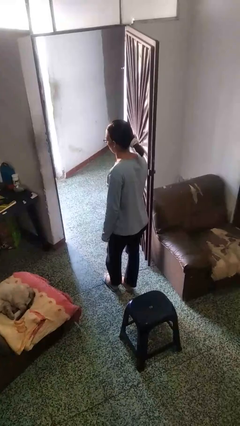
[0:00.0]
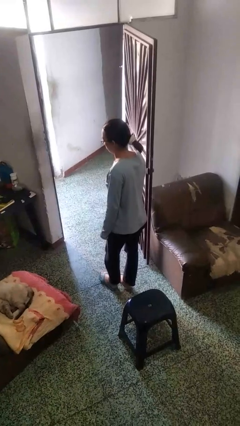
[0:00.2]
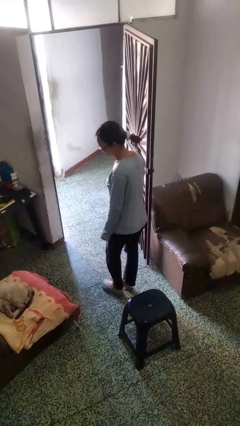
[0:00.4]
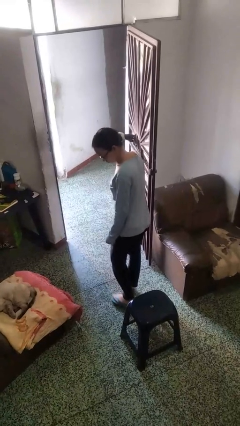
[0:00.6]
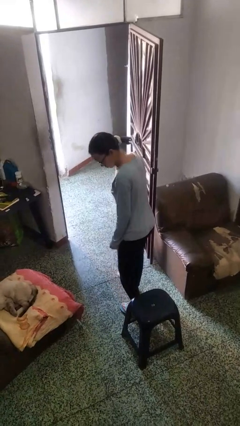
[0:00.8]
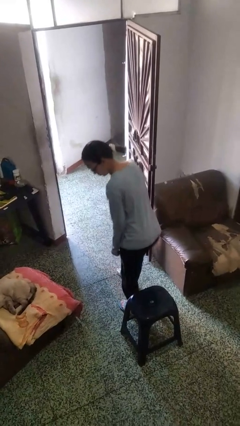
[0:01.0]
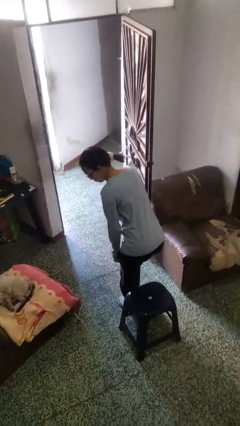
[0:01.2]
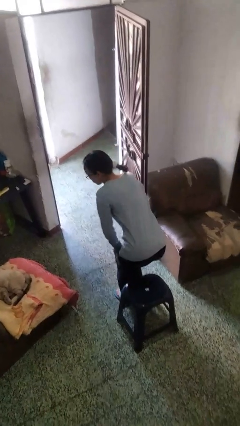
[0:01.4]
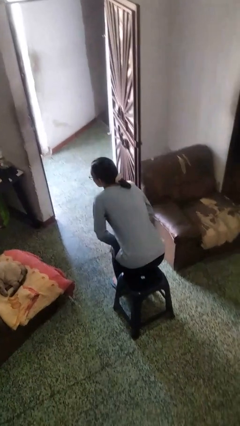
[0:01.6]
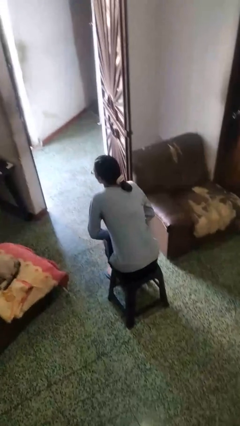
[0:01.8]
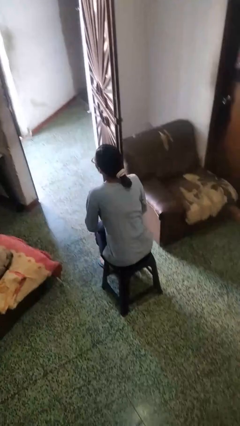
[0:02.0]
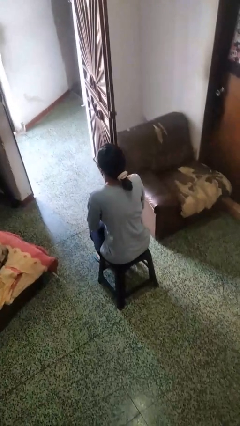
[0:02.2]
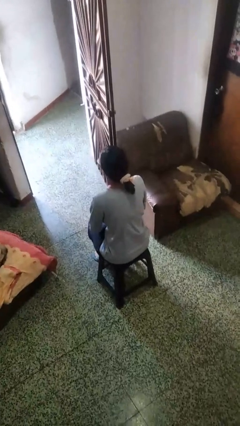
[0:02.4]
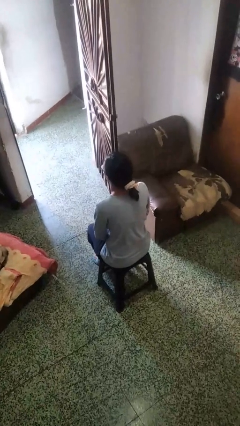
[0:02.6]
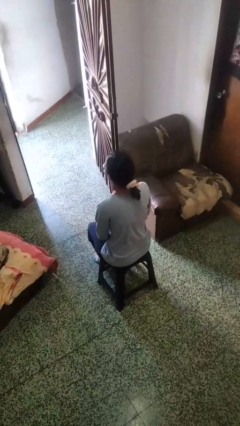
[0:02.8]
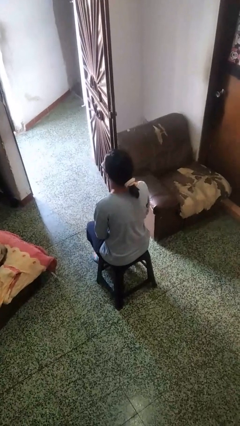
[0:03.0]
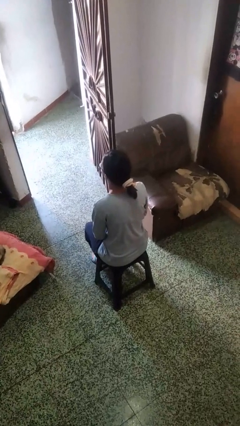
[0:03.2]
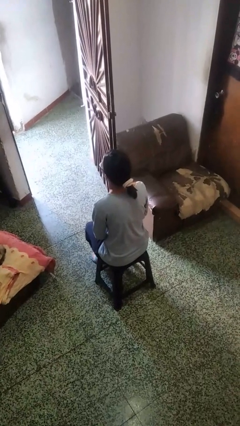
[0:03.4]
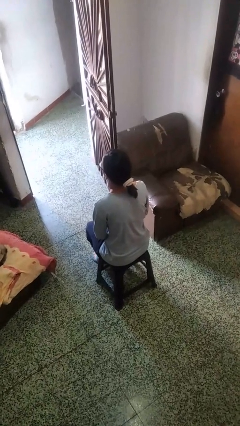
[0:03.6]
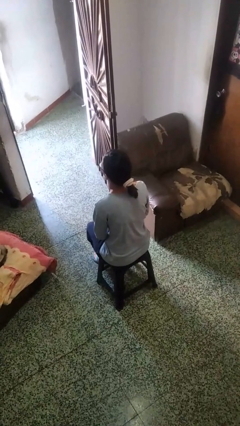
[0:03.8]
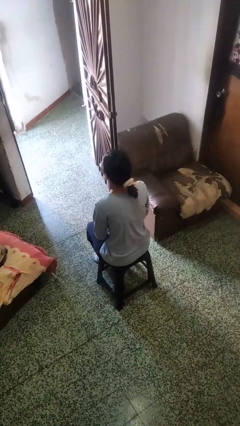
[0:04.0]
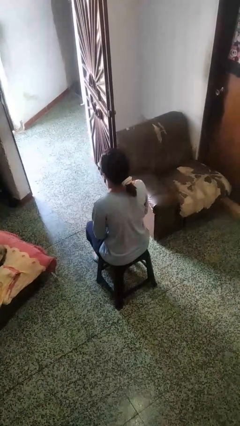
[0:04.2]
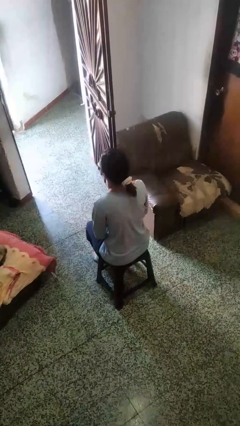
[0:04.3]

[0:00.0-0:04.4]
person sits down

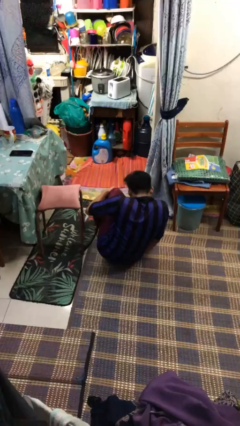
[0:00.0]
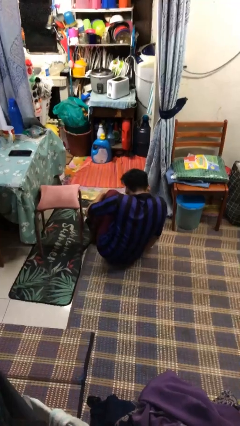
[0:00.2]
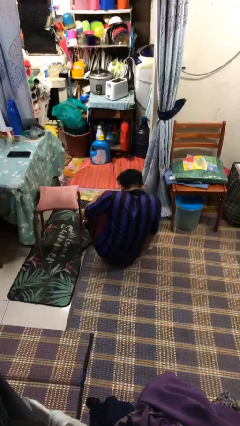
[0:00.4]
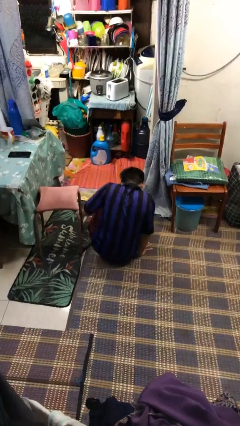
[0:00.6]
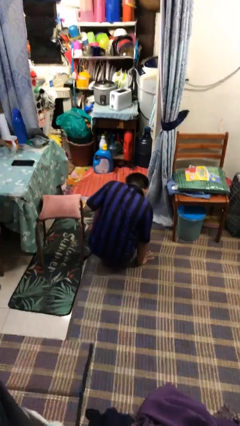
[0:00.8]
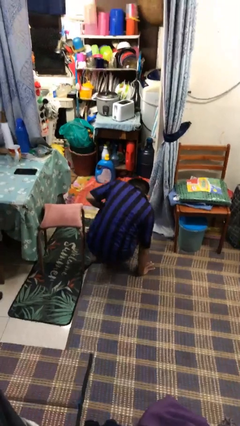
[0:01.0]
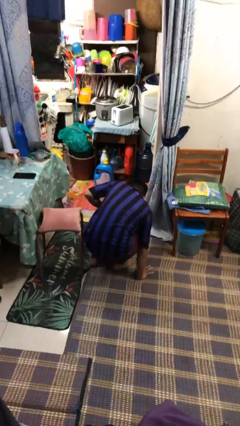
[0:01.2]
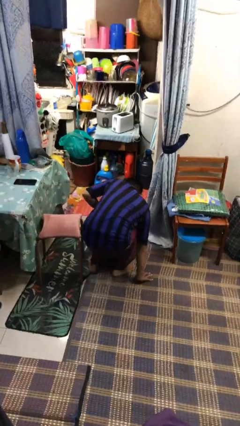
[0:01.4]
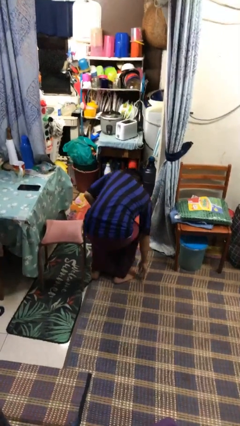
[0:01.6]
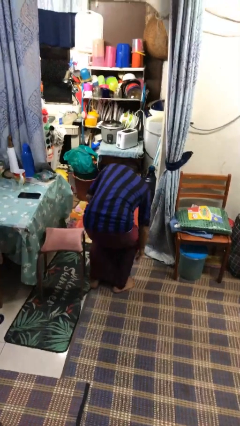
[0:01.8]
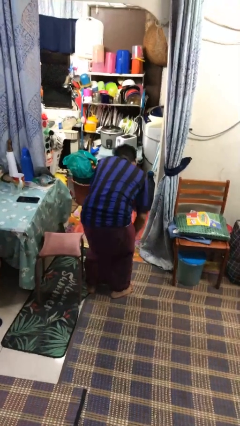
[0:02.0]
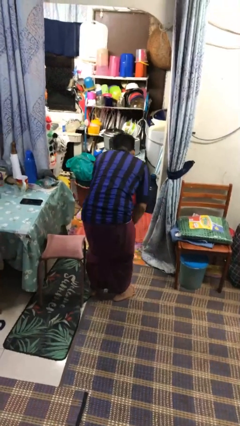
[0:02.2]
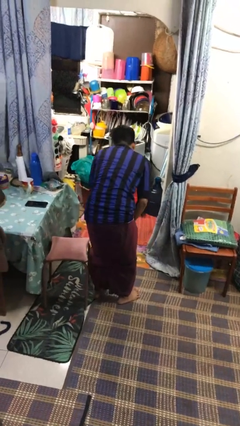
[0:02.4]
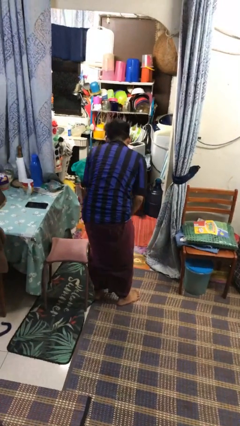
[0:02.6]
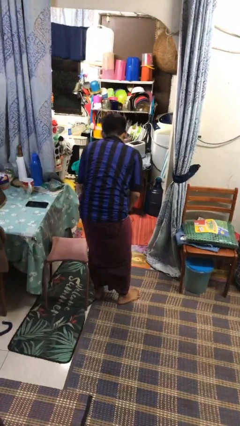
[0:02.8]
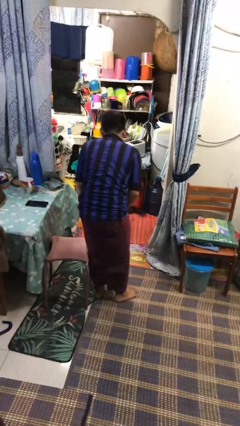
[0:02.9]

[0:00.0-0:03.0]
person stands up from floor

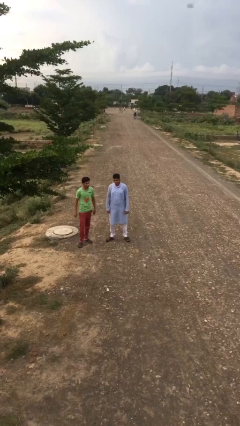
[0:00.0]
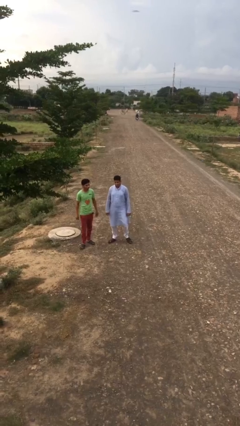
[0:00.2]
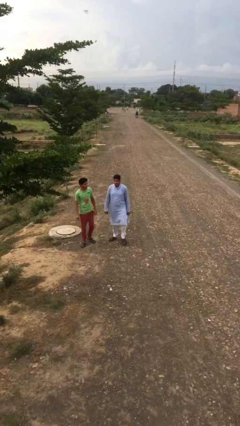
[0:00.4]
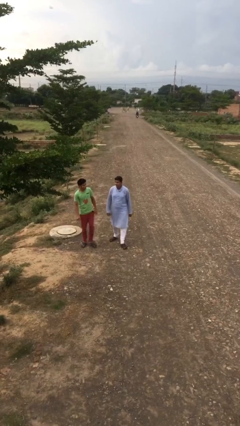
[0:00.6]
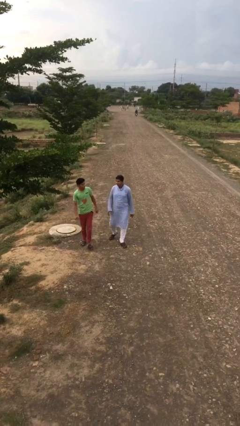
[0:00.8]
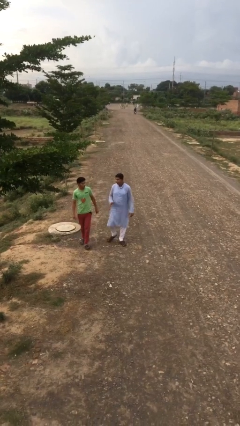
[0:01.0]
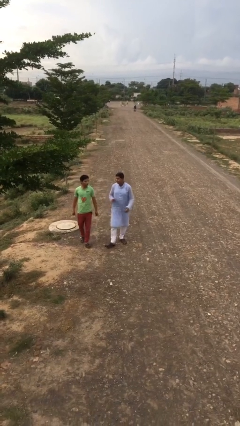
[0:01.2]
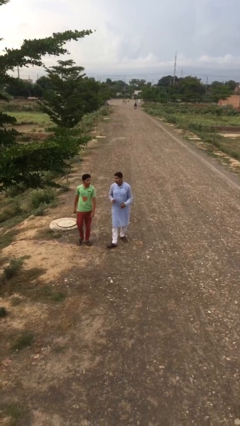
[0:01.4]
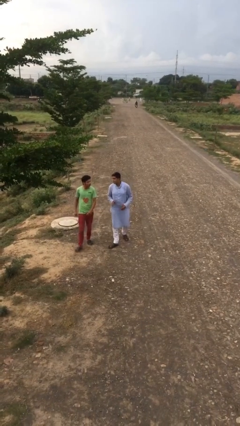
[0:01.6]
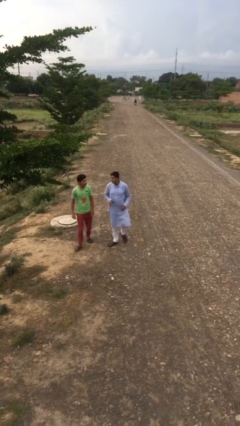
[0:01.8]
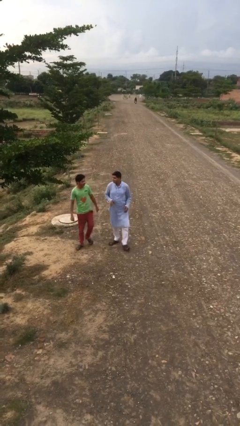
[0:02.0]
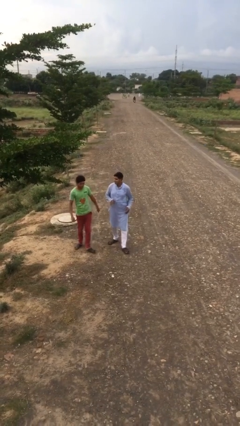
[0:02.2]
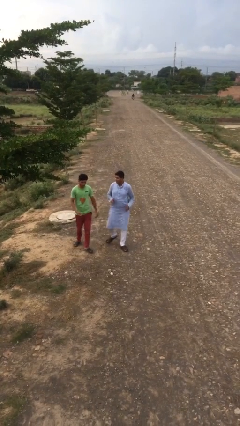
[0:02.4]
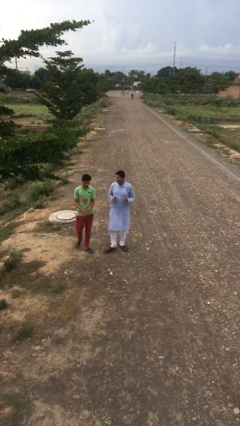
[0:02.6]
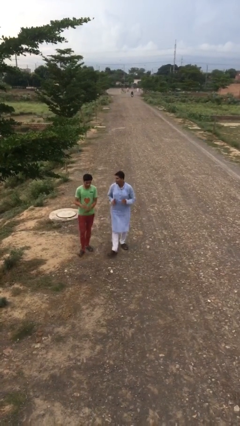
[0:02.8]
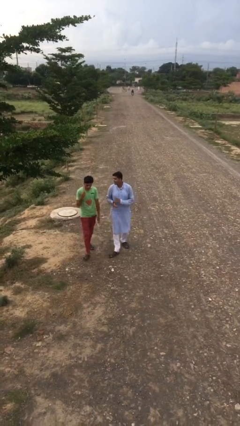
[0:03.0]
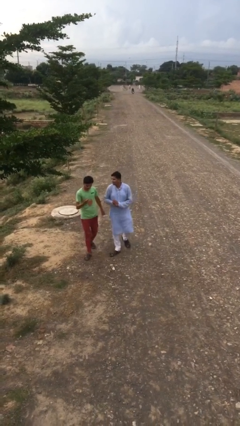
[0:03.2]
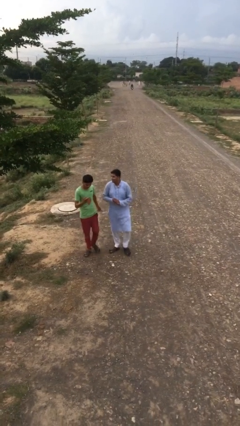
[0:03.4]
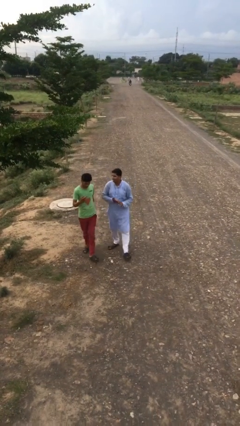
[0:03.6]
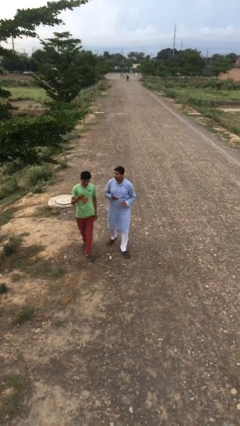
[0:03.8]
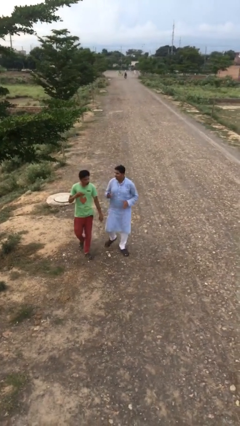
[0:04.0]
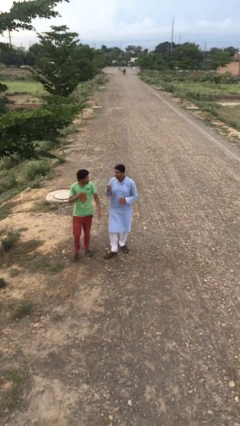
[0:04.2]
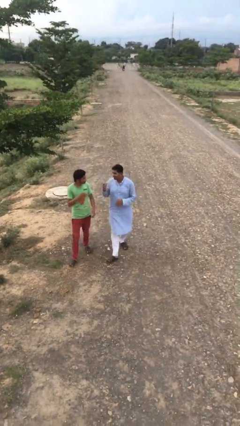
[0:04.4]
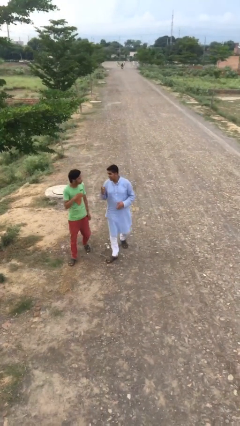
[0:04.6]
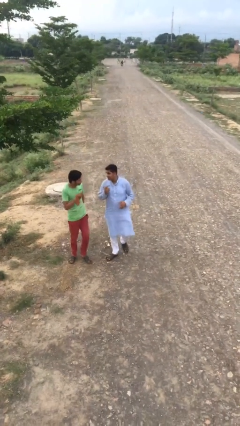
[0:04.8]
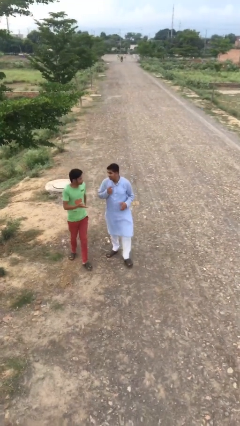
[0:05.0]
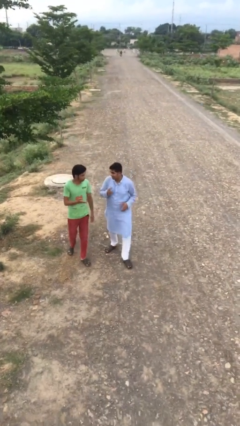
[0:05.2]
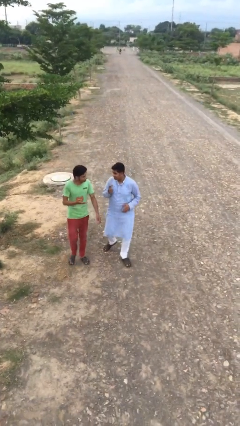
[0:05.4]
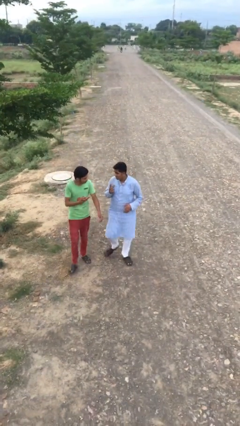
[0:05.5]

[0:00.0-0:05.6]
person talks to person

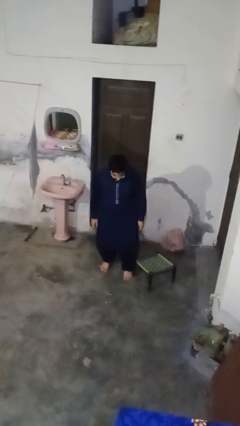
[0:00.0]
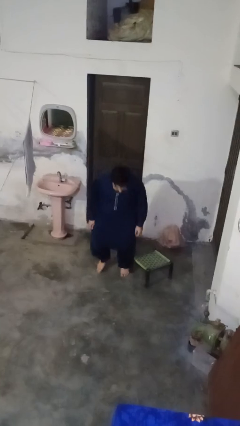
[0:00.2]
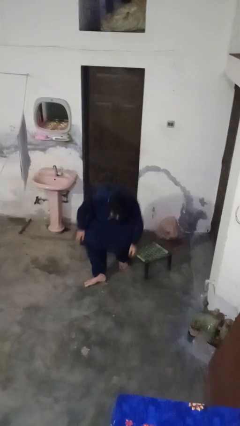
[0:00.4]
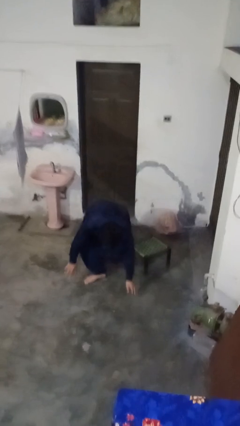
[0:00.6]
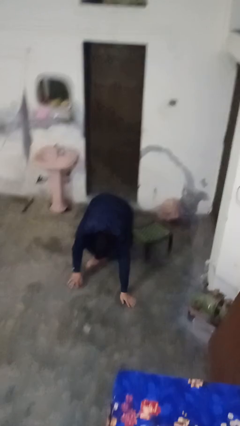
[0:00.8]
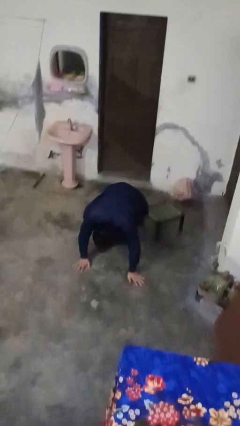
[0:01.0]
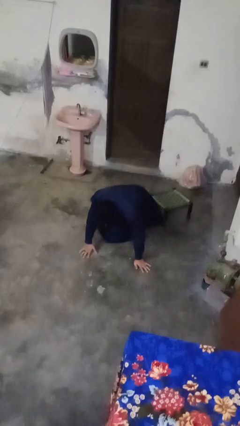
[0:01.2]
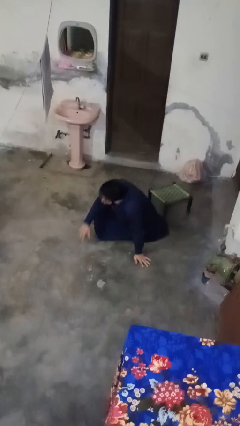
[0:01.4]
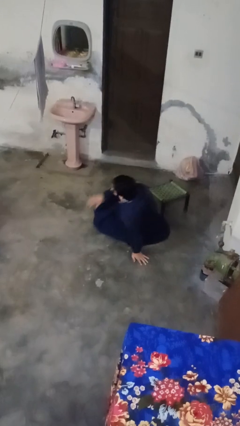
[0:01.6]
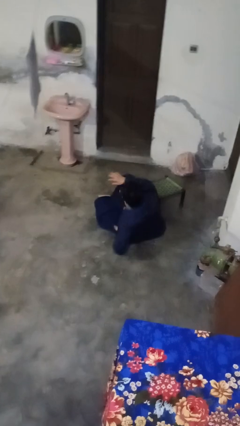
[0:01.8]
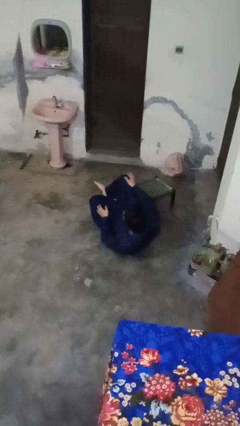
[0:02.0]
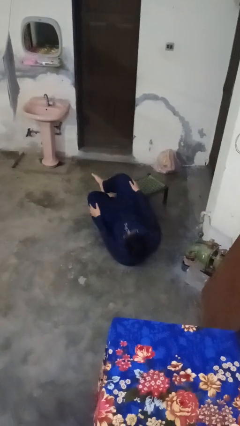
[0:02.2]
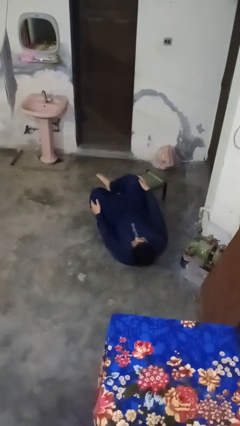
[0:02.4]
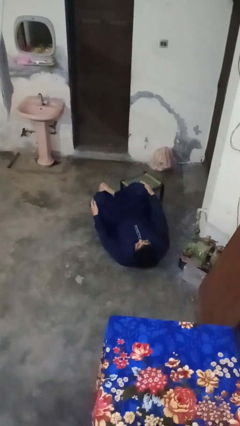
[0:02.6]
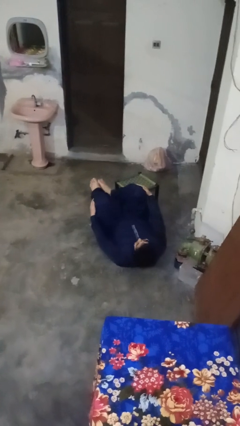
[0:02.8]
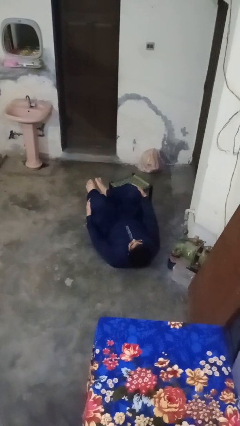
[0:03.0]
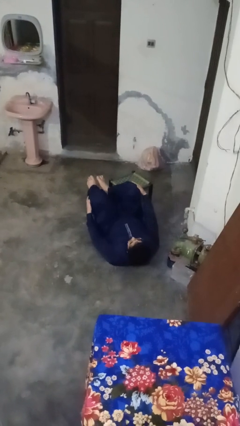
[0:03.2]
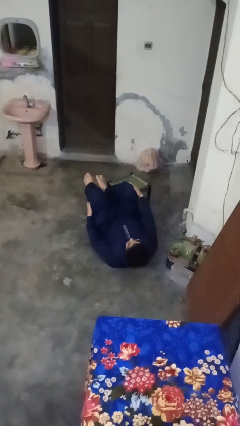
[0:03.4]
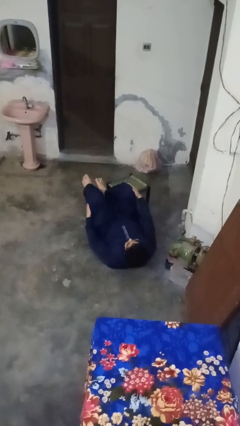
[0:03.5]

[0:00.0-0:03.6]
person lies down on floor

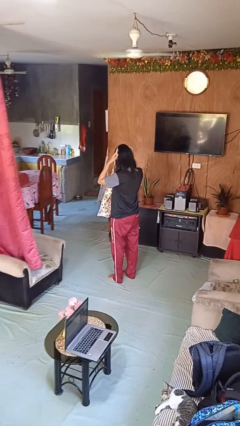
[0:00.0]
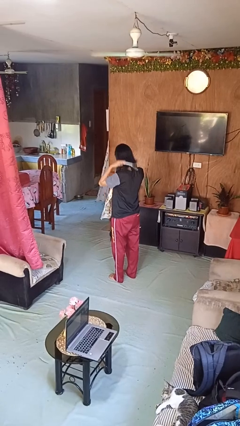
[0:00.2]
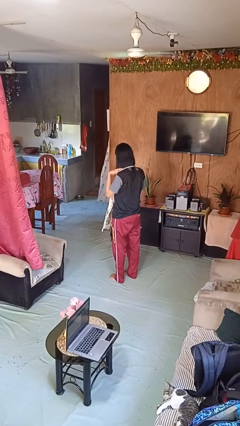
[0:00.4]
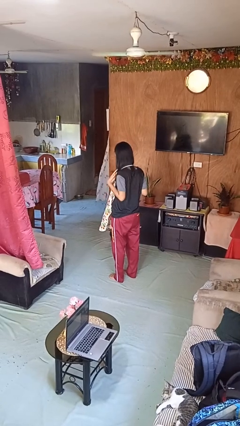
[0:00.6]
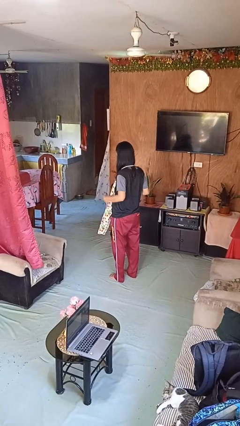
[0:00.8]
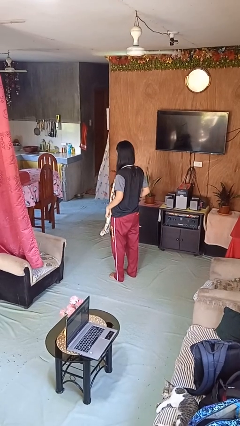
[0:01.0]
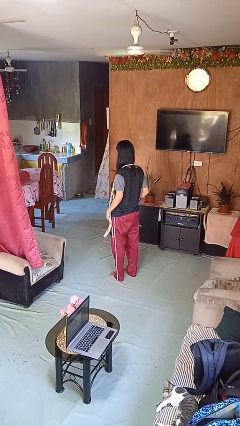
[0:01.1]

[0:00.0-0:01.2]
person puts on apron
